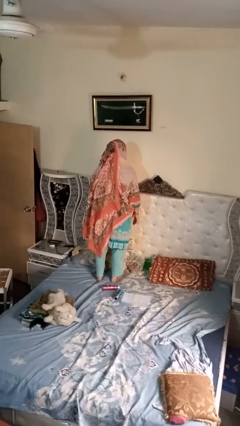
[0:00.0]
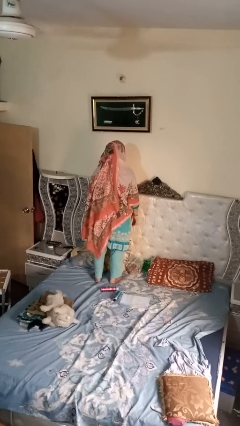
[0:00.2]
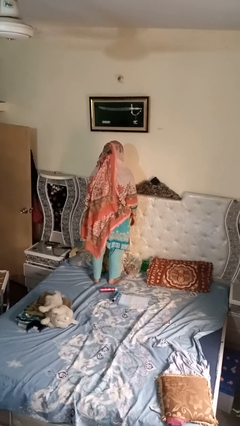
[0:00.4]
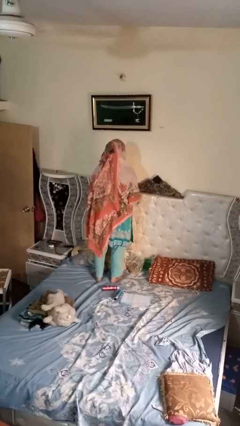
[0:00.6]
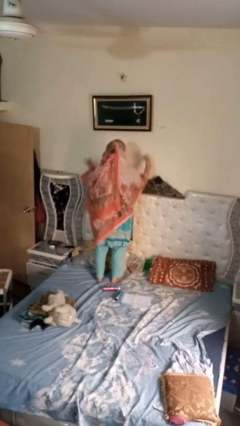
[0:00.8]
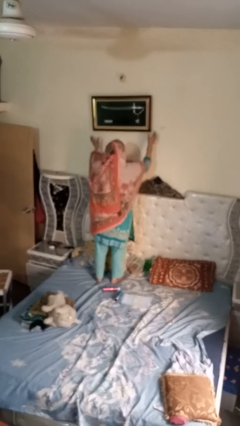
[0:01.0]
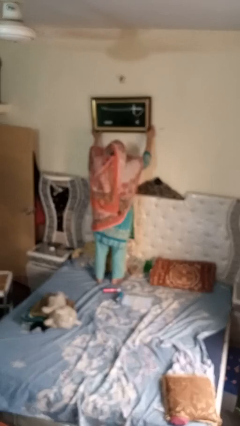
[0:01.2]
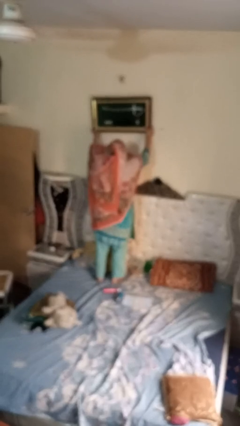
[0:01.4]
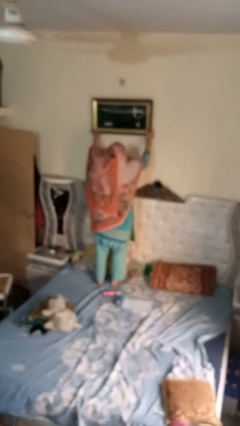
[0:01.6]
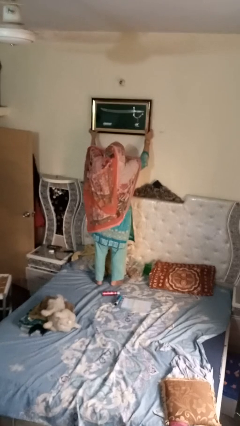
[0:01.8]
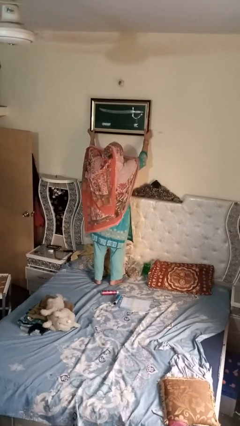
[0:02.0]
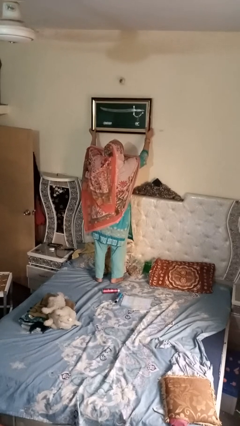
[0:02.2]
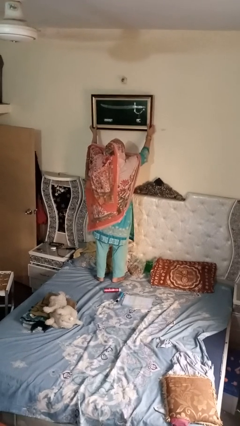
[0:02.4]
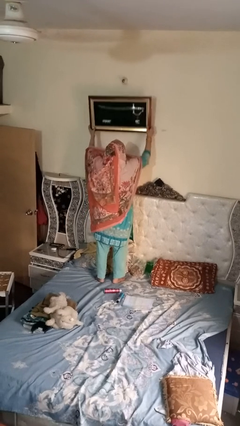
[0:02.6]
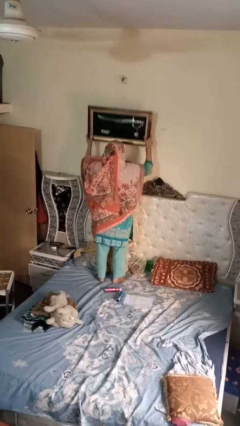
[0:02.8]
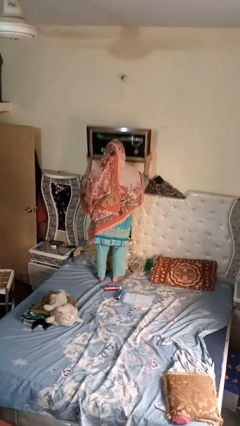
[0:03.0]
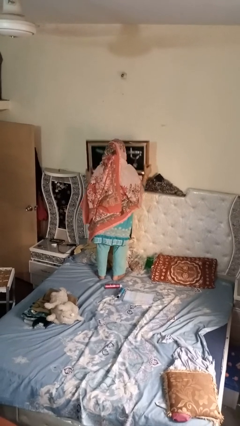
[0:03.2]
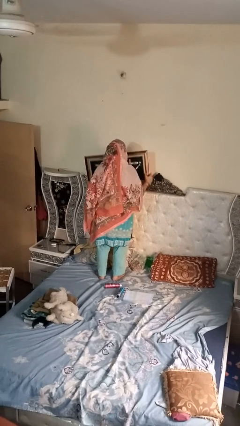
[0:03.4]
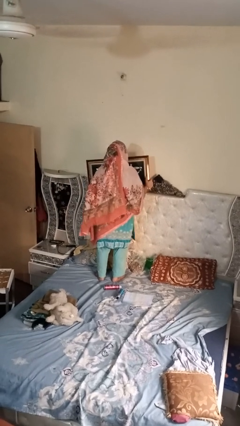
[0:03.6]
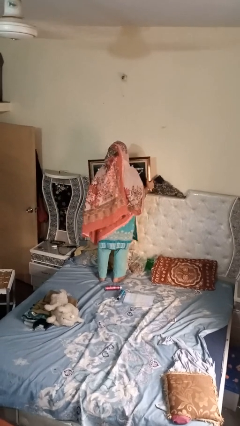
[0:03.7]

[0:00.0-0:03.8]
person puts up picture frame

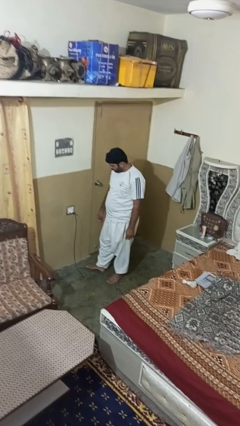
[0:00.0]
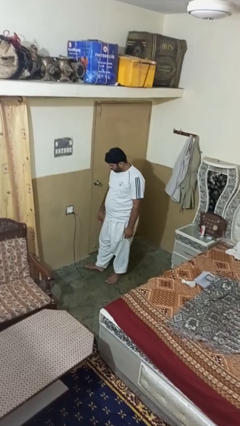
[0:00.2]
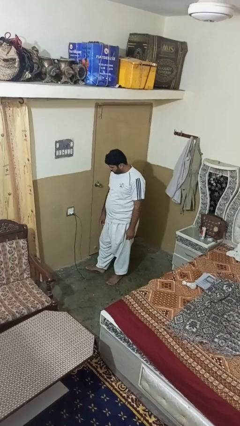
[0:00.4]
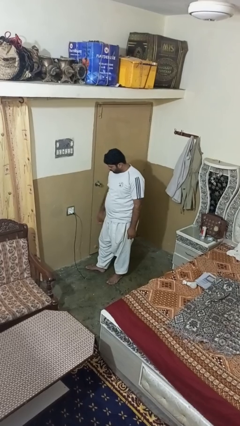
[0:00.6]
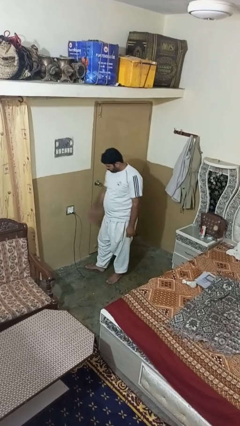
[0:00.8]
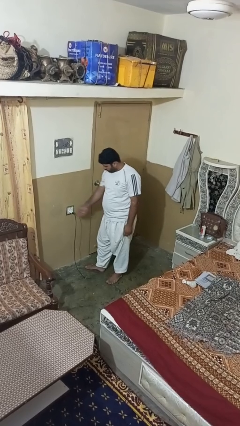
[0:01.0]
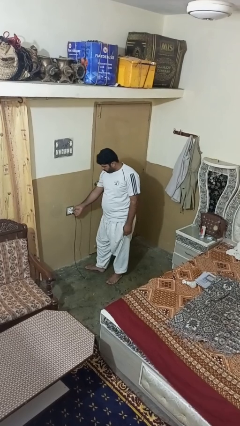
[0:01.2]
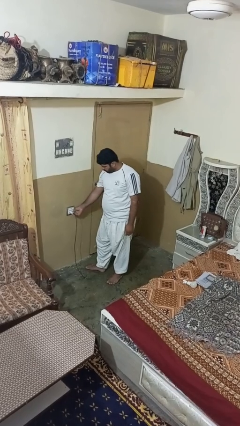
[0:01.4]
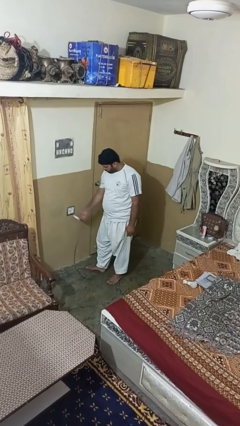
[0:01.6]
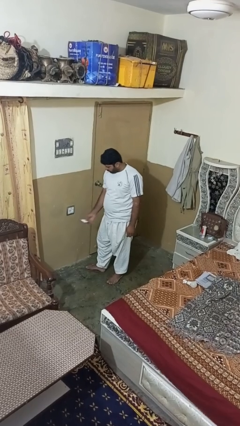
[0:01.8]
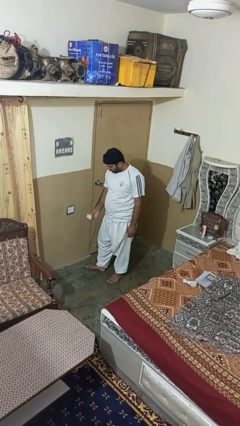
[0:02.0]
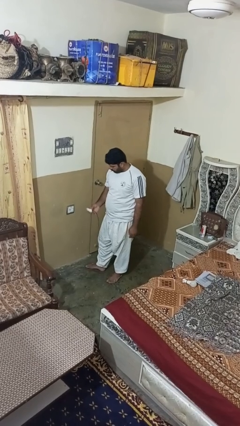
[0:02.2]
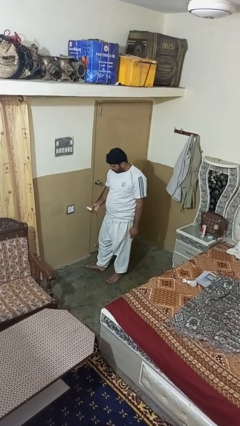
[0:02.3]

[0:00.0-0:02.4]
person unplugs from electrical socket

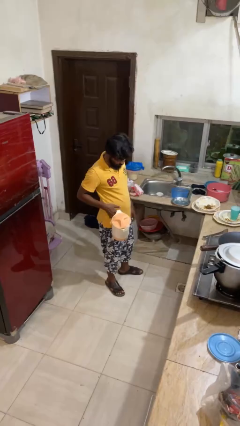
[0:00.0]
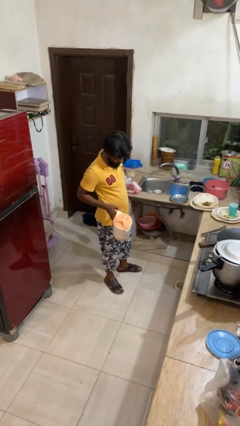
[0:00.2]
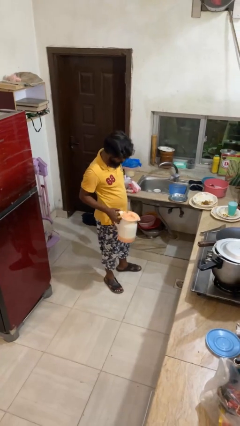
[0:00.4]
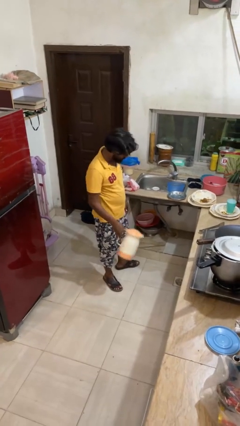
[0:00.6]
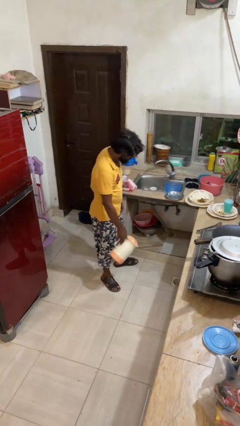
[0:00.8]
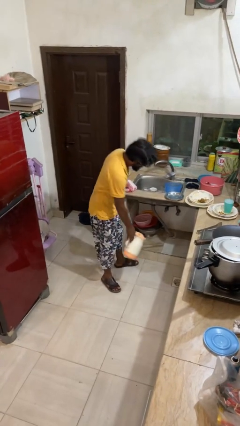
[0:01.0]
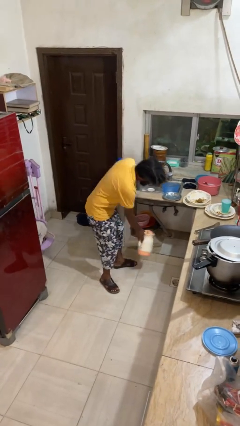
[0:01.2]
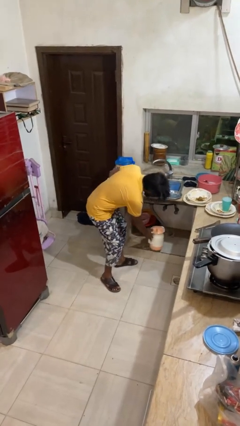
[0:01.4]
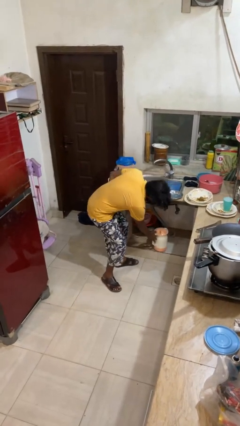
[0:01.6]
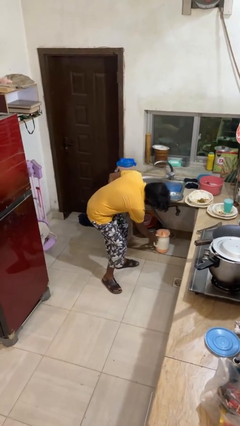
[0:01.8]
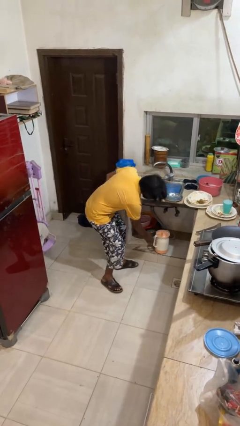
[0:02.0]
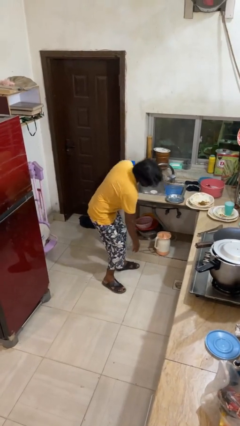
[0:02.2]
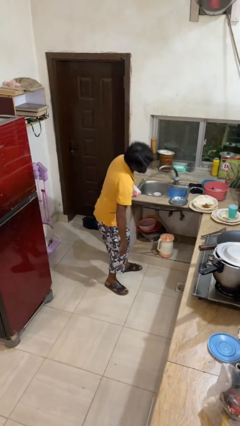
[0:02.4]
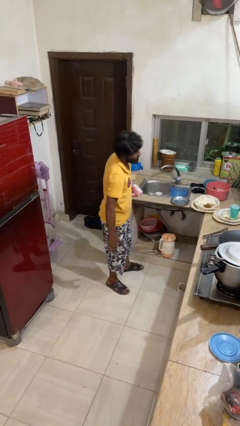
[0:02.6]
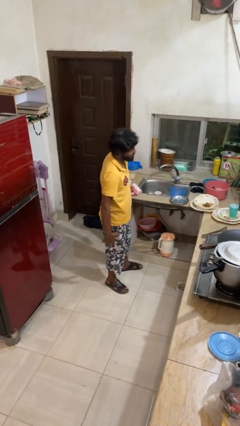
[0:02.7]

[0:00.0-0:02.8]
person puts down object into cabinet

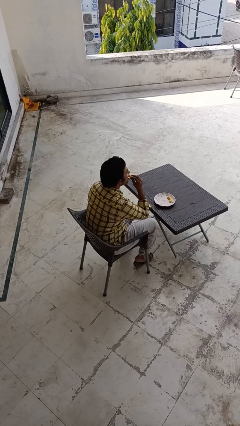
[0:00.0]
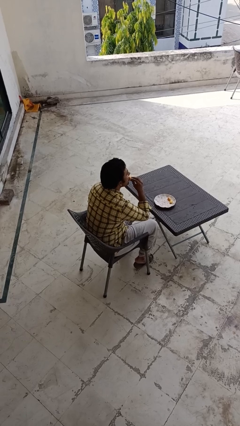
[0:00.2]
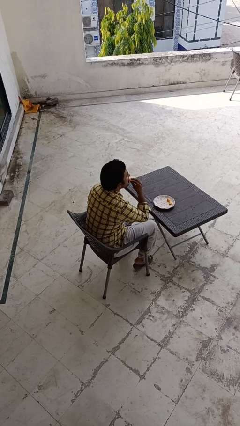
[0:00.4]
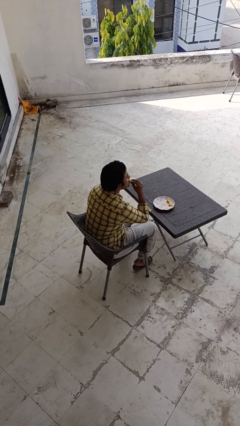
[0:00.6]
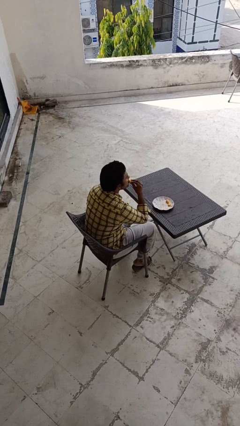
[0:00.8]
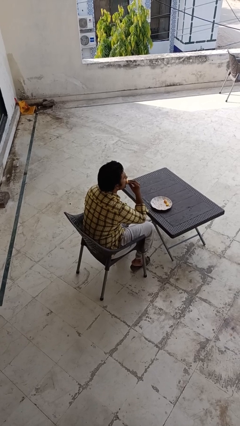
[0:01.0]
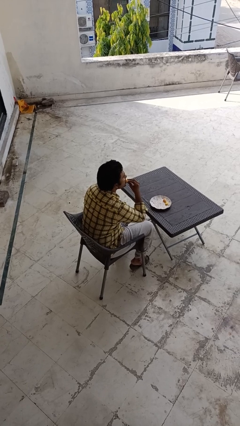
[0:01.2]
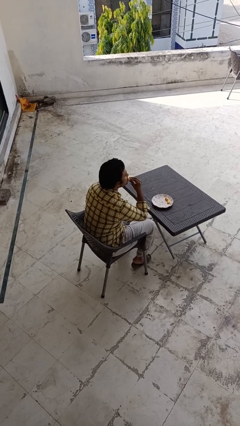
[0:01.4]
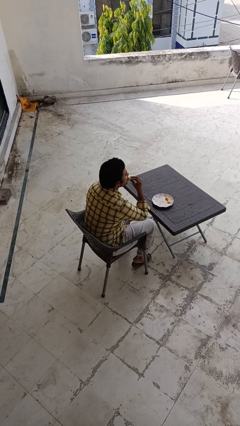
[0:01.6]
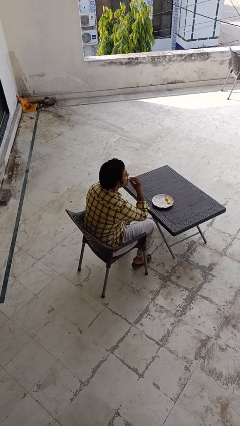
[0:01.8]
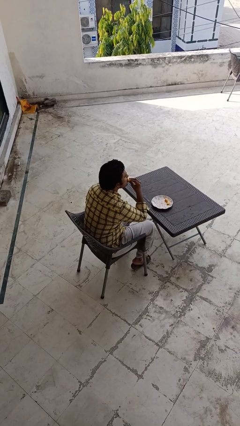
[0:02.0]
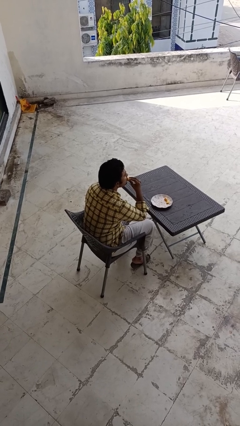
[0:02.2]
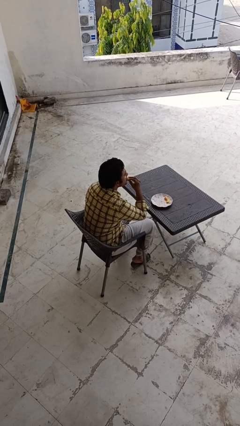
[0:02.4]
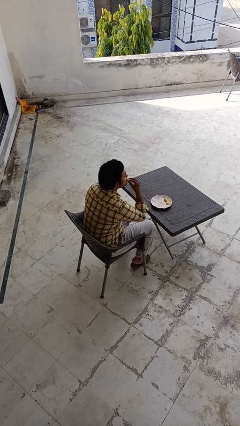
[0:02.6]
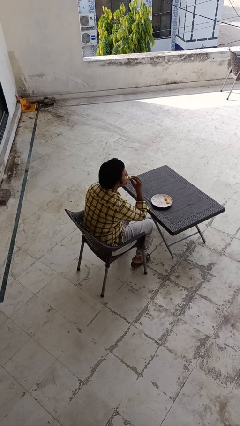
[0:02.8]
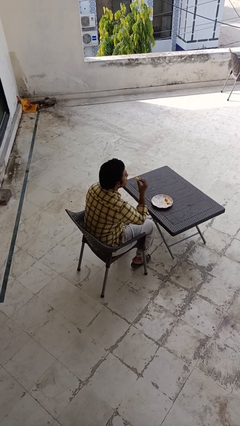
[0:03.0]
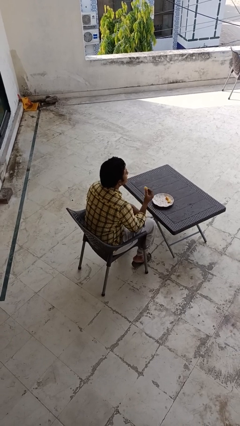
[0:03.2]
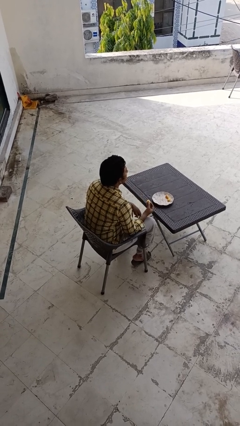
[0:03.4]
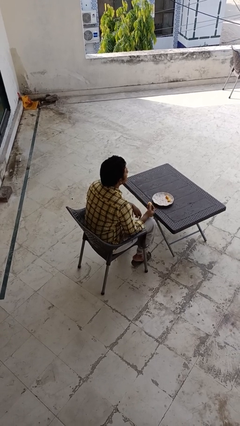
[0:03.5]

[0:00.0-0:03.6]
person eats with hands

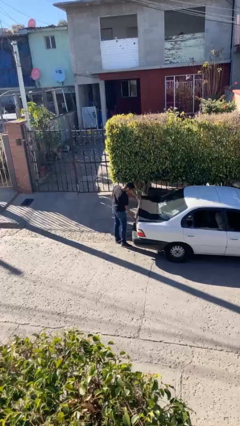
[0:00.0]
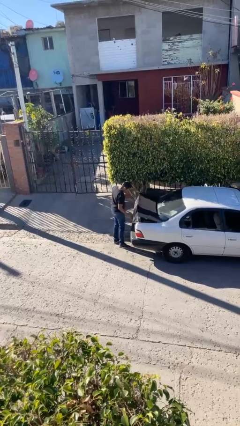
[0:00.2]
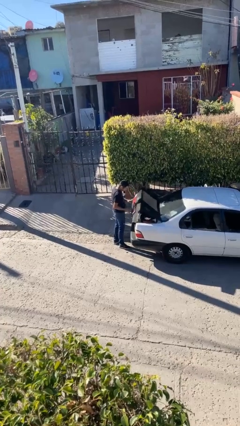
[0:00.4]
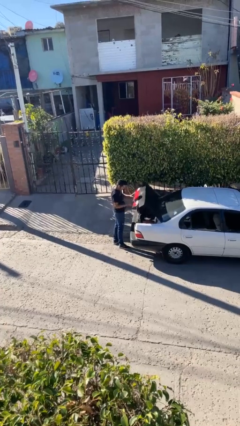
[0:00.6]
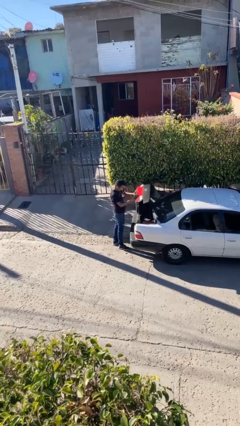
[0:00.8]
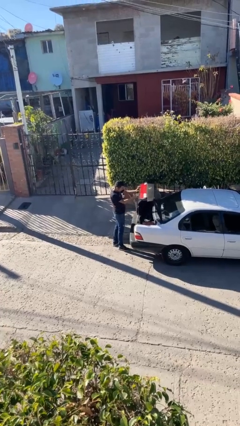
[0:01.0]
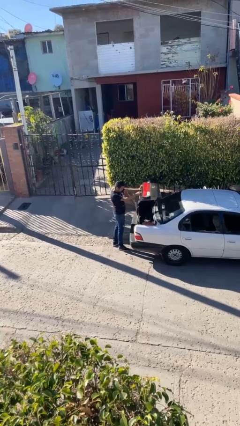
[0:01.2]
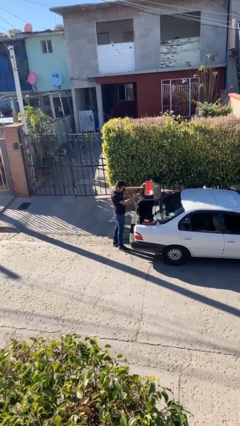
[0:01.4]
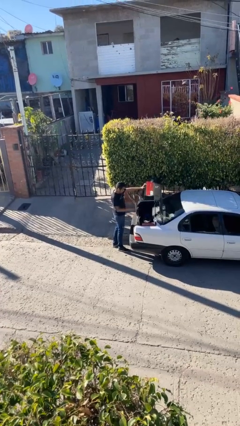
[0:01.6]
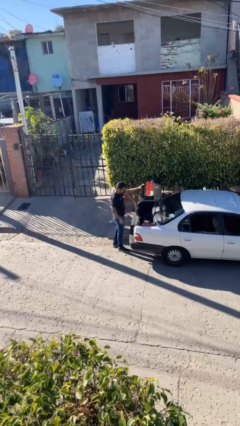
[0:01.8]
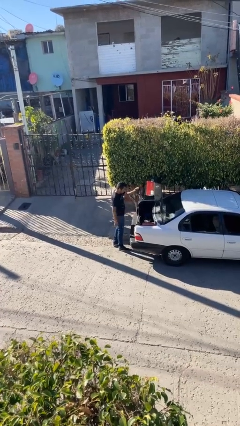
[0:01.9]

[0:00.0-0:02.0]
person opens car trunk

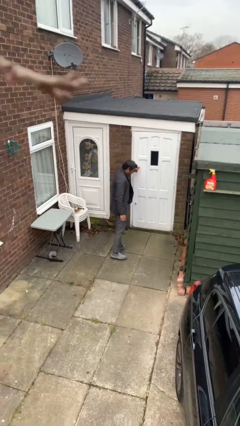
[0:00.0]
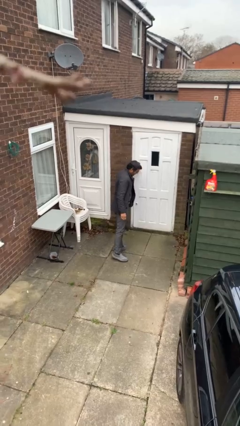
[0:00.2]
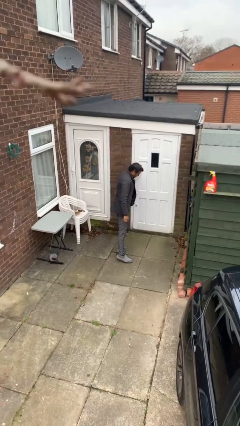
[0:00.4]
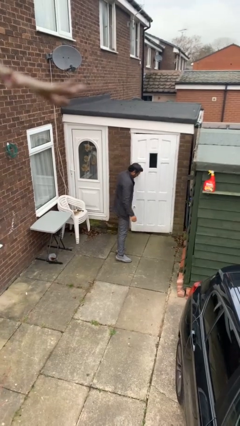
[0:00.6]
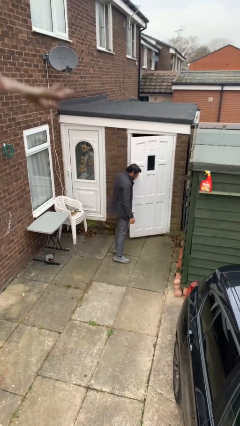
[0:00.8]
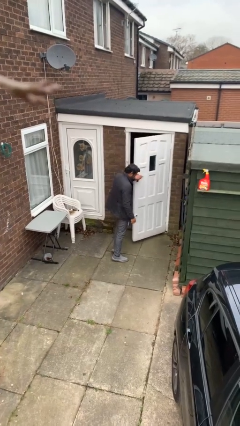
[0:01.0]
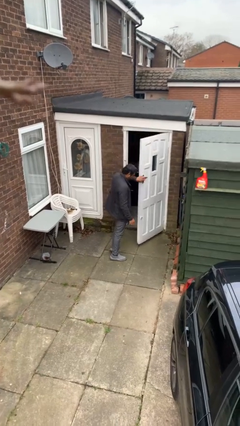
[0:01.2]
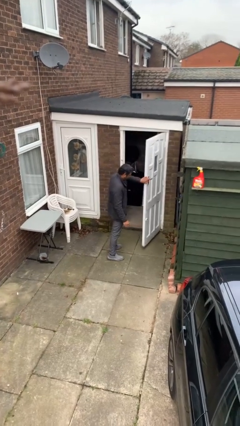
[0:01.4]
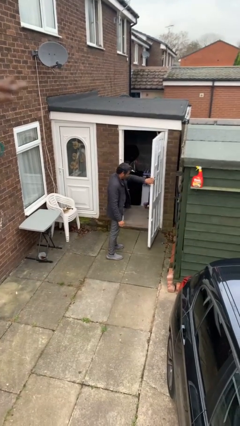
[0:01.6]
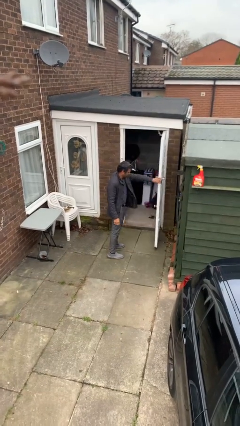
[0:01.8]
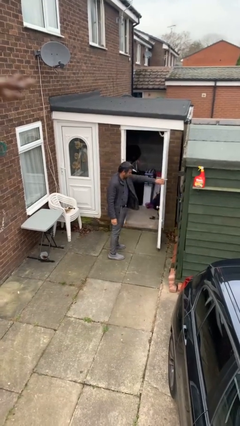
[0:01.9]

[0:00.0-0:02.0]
person opens facility door
